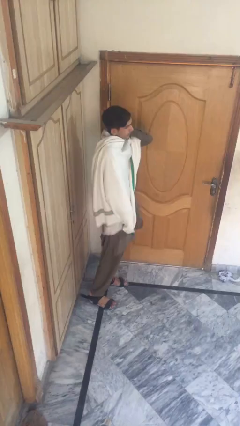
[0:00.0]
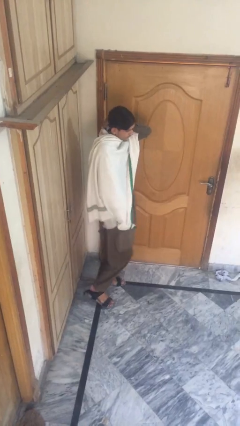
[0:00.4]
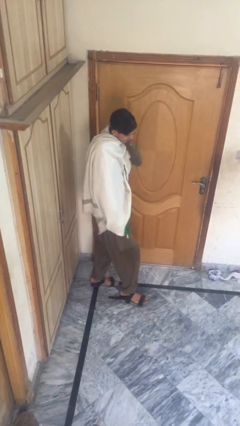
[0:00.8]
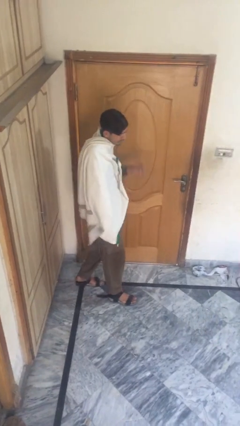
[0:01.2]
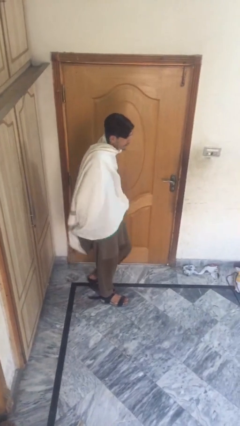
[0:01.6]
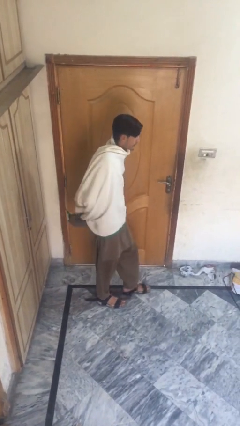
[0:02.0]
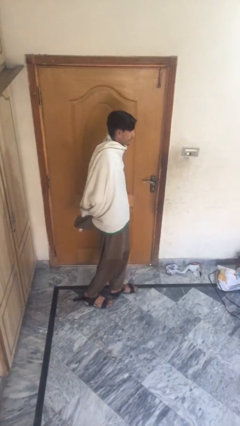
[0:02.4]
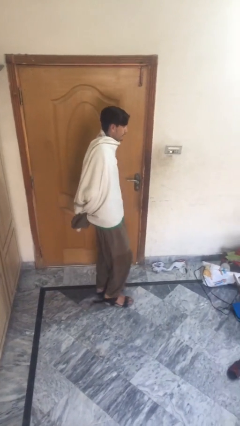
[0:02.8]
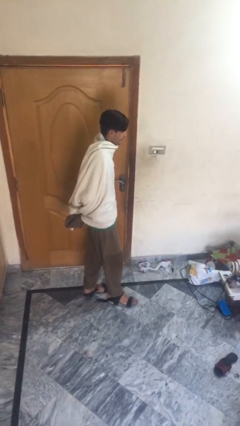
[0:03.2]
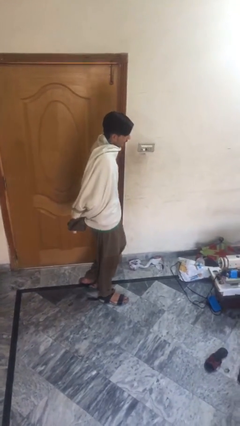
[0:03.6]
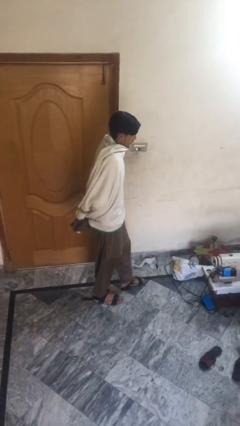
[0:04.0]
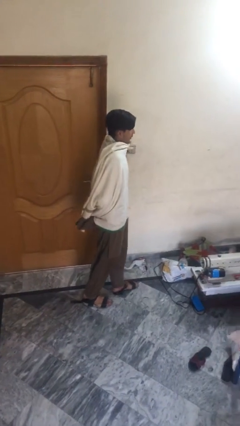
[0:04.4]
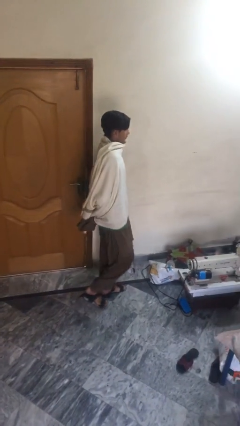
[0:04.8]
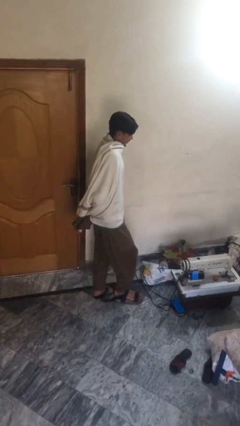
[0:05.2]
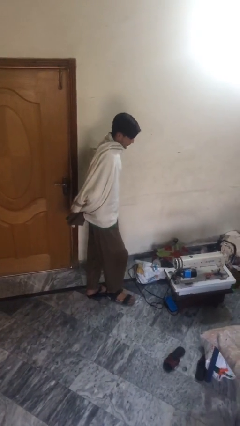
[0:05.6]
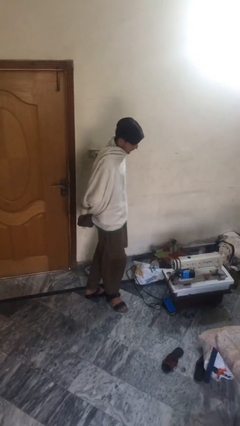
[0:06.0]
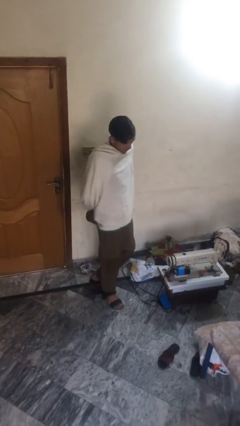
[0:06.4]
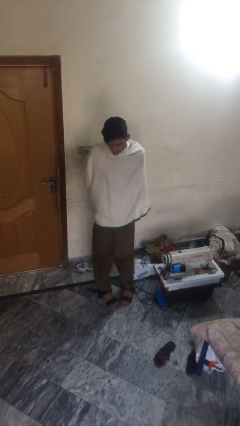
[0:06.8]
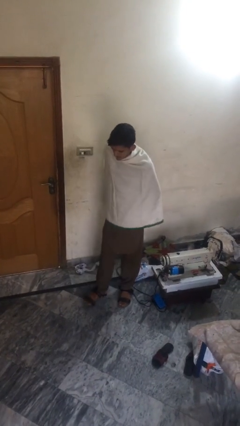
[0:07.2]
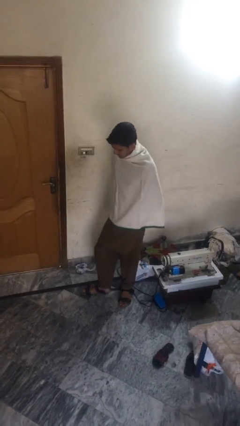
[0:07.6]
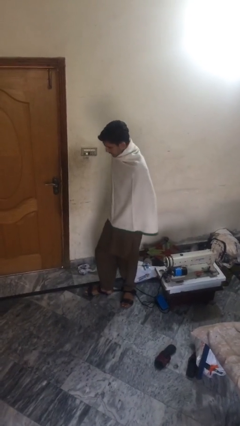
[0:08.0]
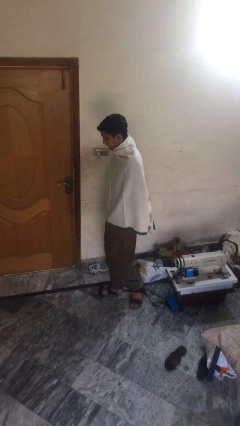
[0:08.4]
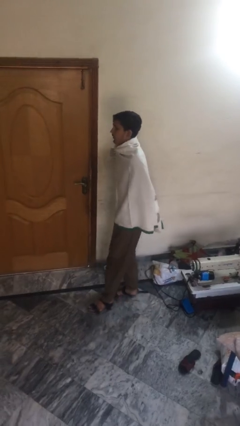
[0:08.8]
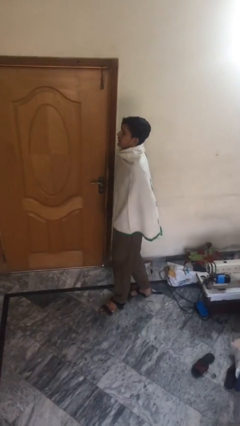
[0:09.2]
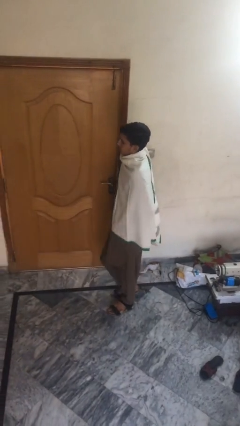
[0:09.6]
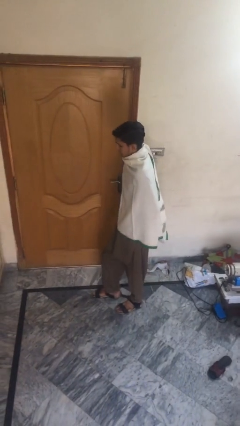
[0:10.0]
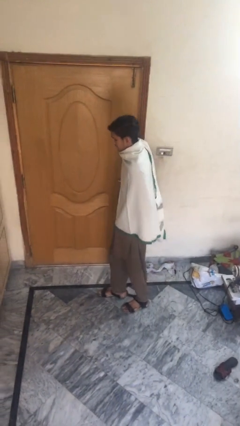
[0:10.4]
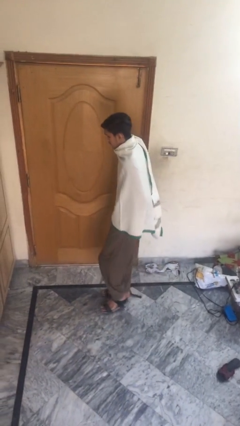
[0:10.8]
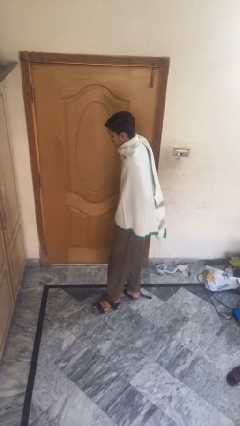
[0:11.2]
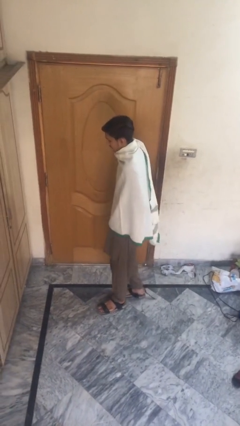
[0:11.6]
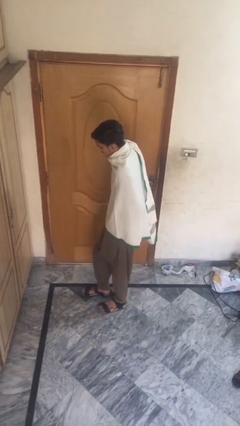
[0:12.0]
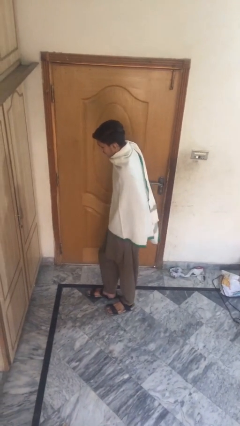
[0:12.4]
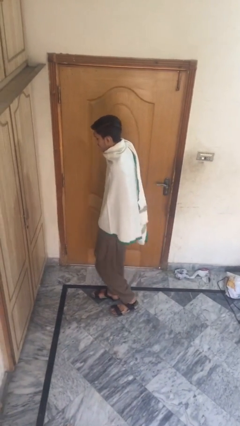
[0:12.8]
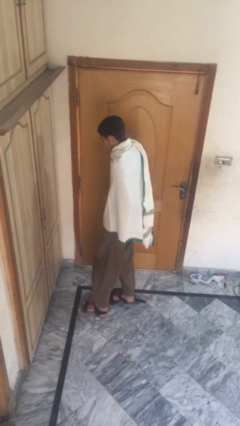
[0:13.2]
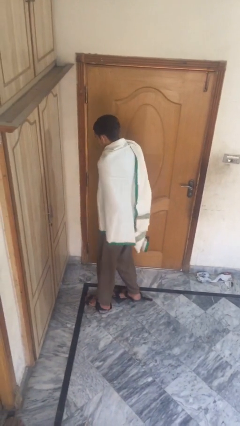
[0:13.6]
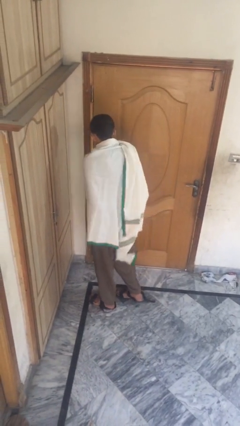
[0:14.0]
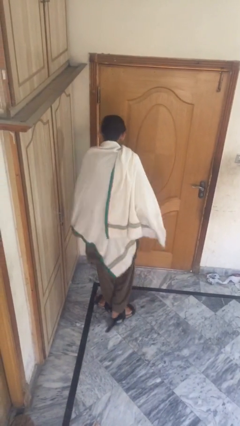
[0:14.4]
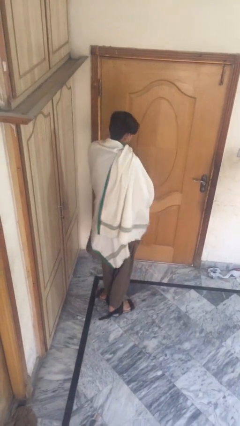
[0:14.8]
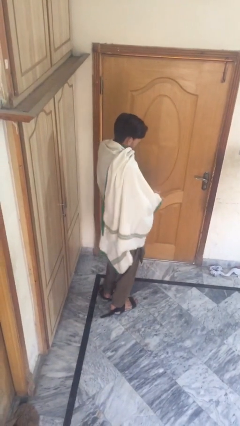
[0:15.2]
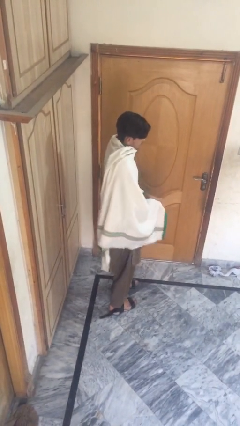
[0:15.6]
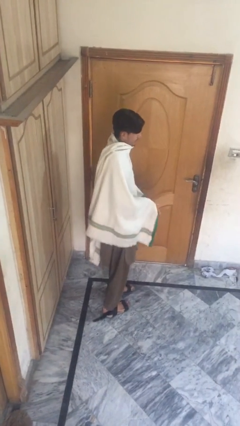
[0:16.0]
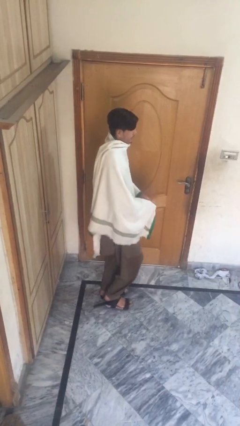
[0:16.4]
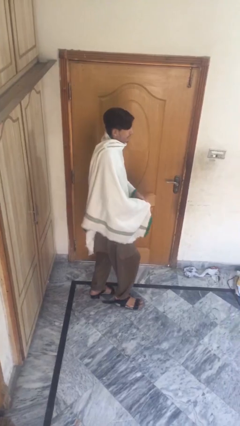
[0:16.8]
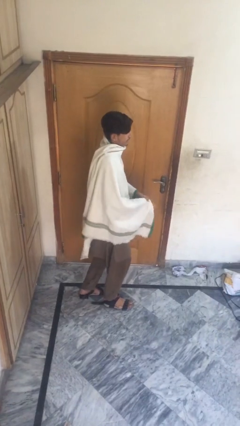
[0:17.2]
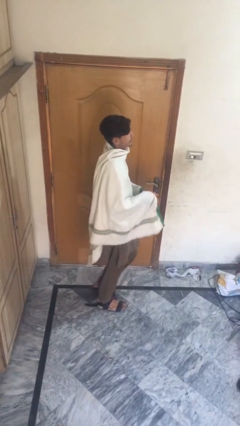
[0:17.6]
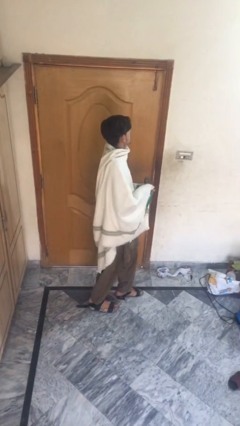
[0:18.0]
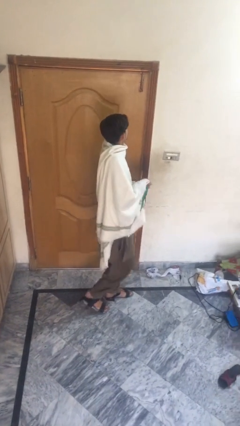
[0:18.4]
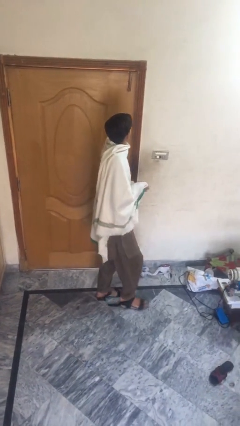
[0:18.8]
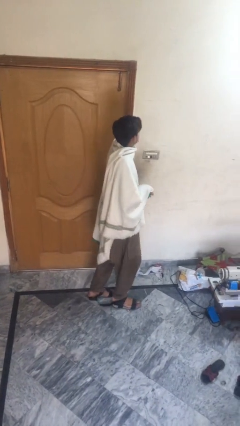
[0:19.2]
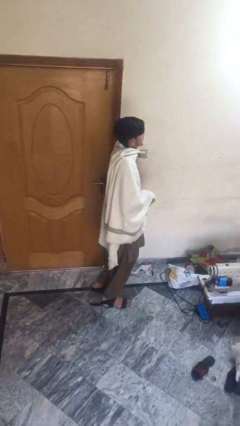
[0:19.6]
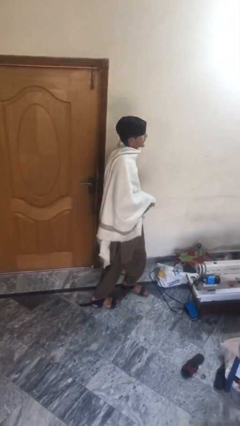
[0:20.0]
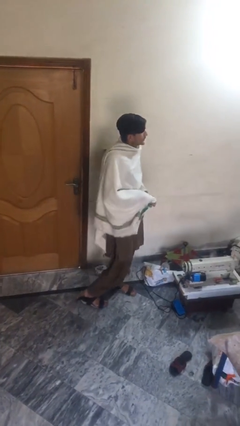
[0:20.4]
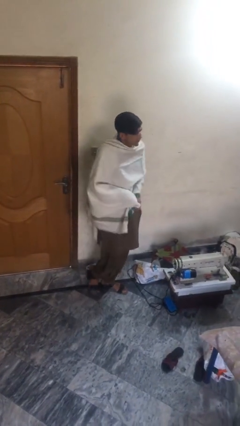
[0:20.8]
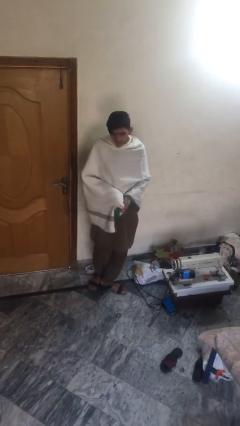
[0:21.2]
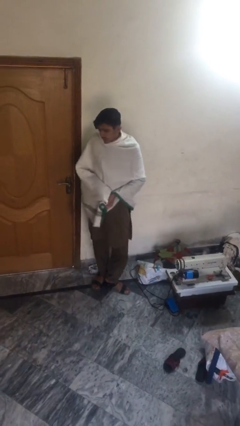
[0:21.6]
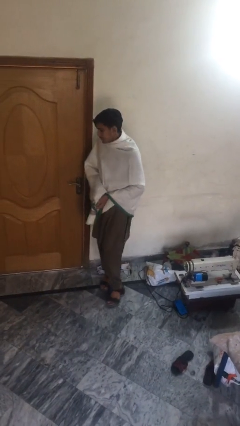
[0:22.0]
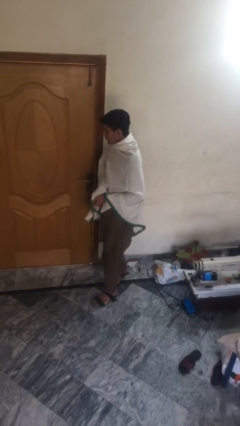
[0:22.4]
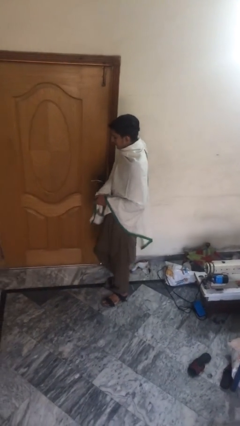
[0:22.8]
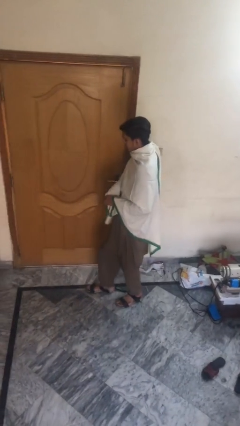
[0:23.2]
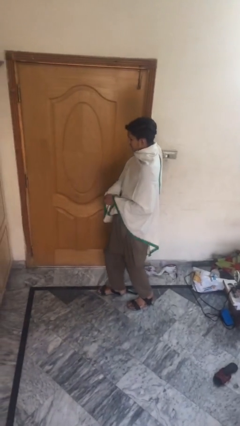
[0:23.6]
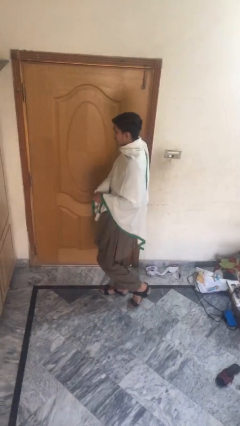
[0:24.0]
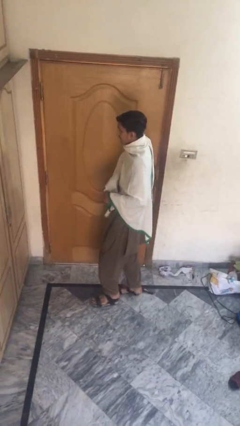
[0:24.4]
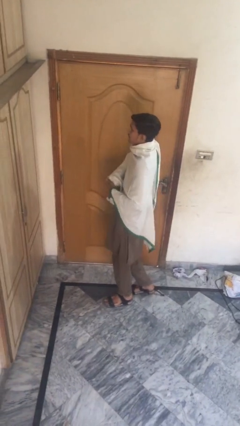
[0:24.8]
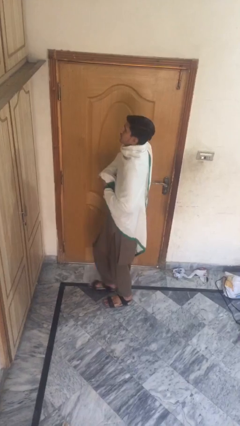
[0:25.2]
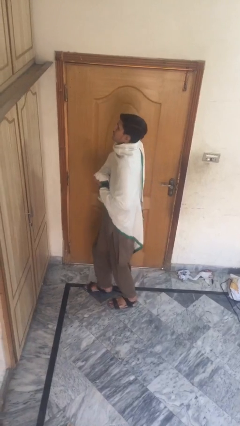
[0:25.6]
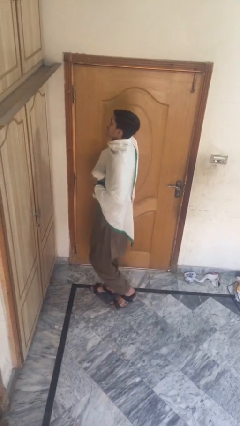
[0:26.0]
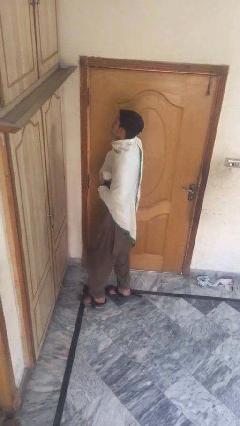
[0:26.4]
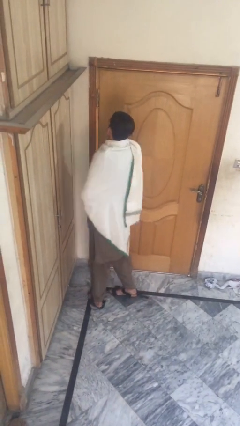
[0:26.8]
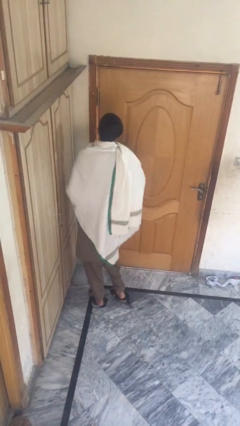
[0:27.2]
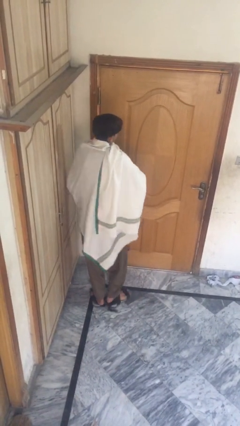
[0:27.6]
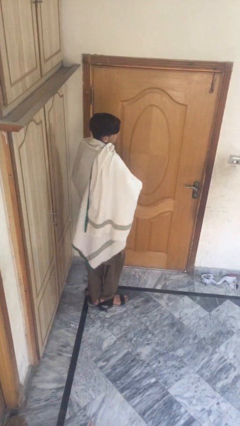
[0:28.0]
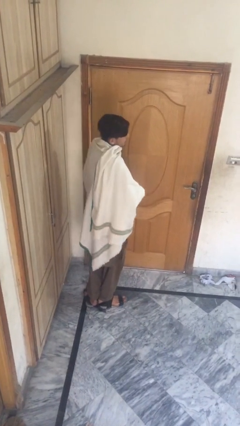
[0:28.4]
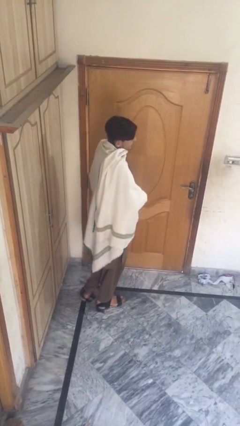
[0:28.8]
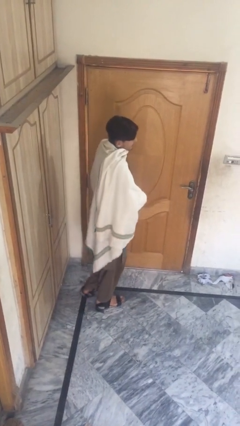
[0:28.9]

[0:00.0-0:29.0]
person walks

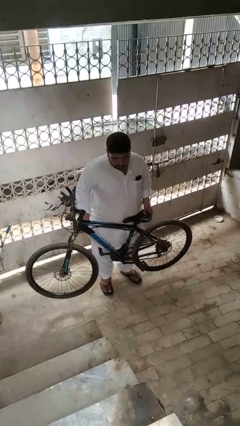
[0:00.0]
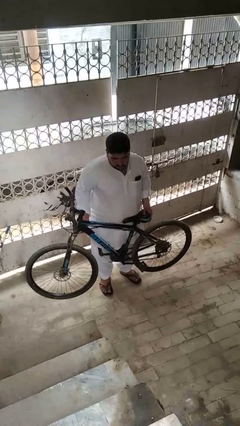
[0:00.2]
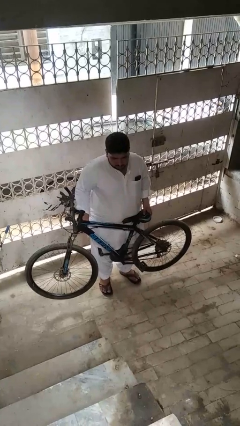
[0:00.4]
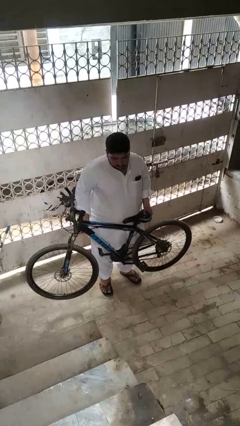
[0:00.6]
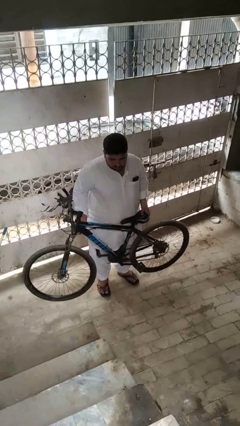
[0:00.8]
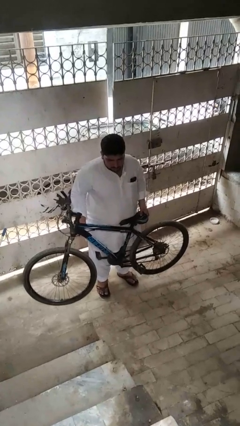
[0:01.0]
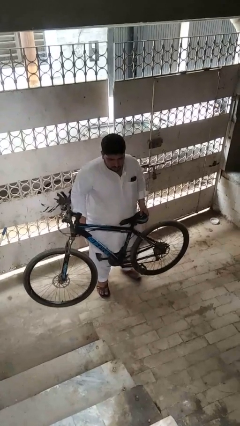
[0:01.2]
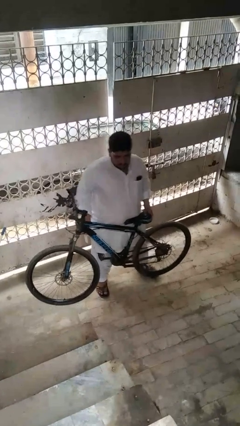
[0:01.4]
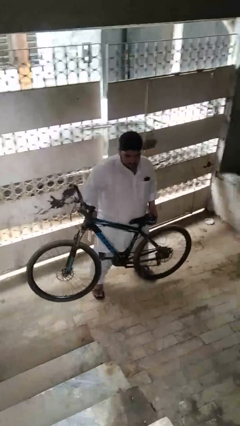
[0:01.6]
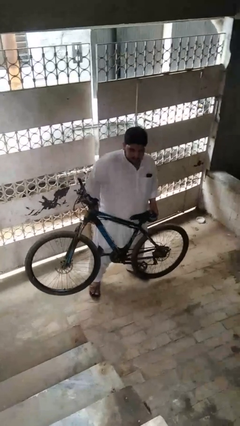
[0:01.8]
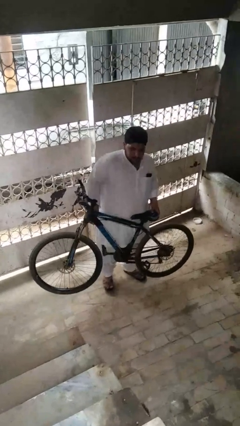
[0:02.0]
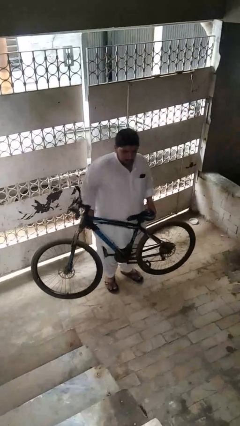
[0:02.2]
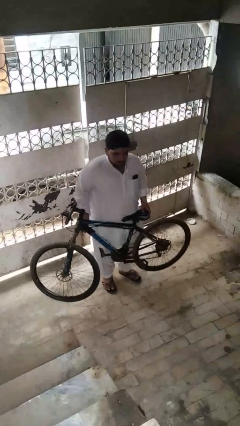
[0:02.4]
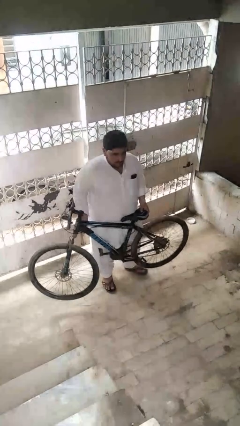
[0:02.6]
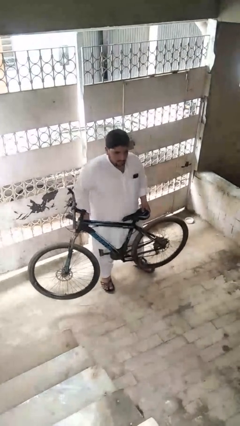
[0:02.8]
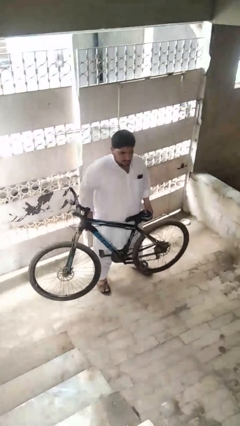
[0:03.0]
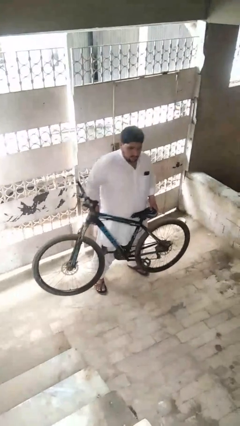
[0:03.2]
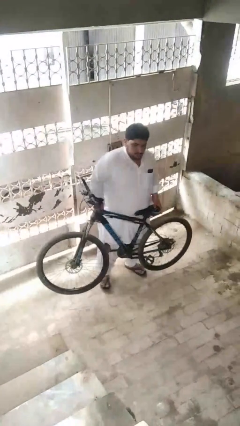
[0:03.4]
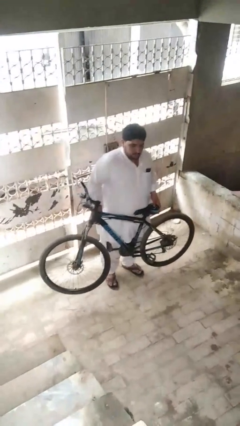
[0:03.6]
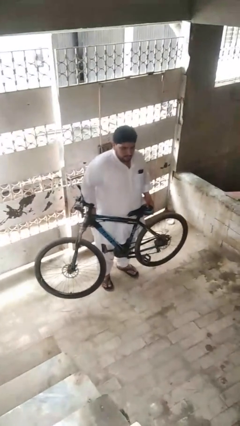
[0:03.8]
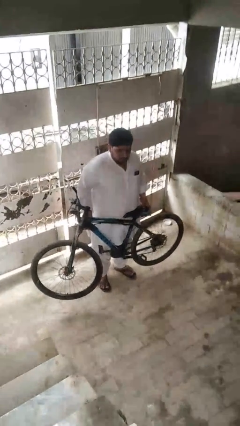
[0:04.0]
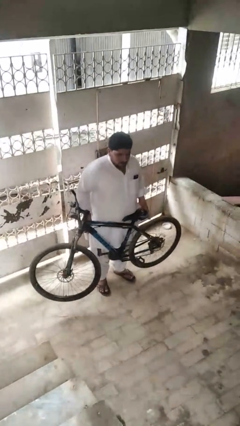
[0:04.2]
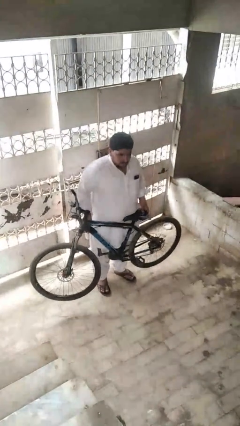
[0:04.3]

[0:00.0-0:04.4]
person carries bicycle
